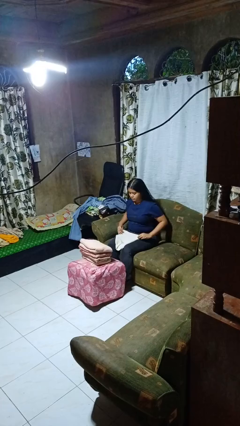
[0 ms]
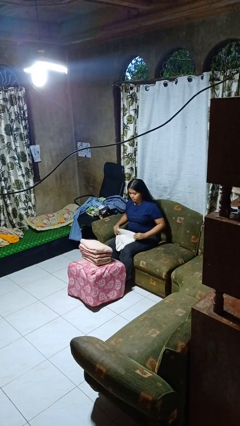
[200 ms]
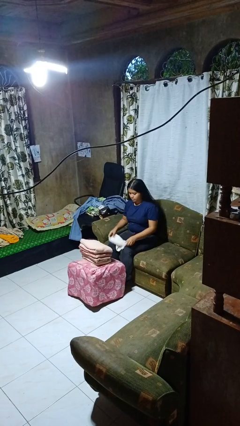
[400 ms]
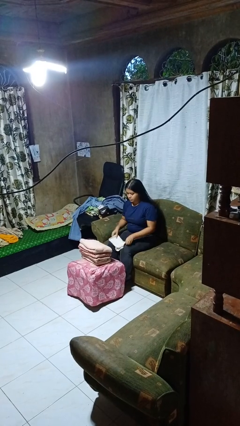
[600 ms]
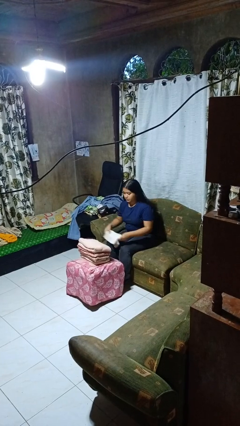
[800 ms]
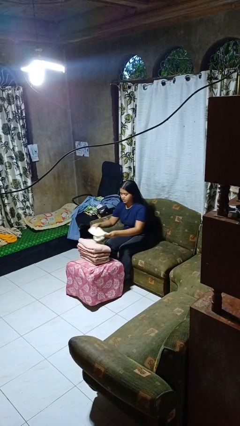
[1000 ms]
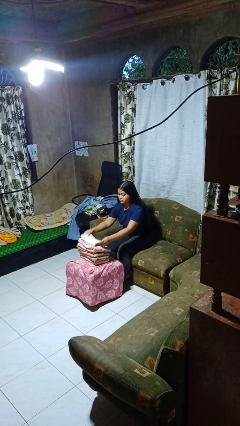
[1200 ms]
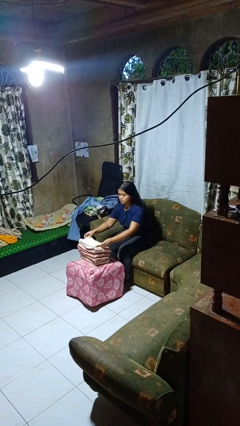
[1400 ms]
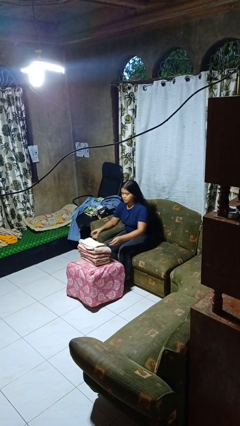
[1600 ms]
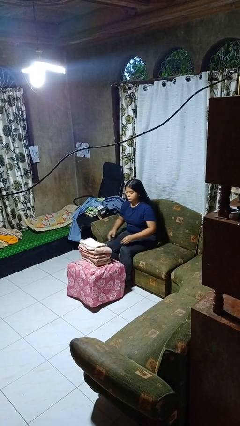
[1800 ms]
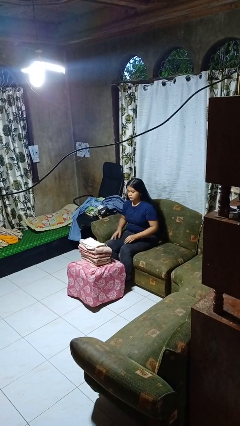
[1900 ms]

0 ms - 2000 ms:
person folds towel

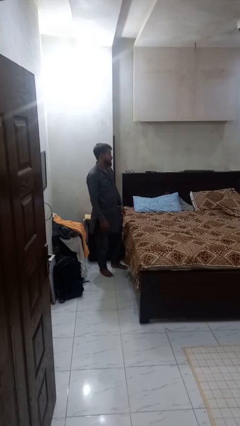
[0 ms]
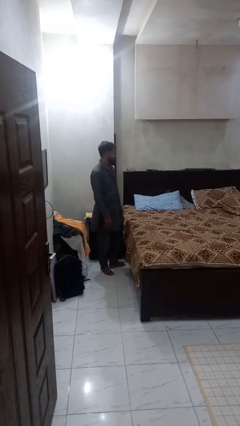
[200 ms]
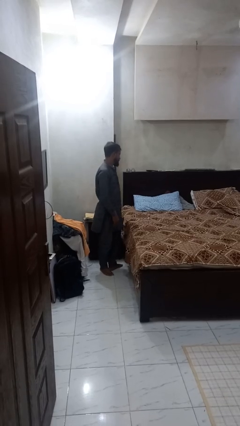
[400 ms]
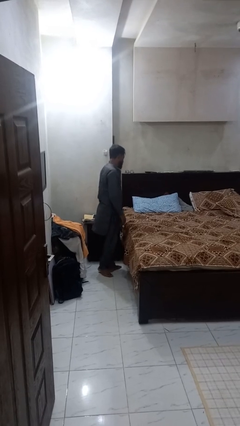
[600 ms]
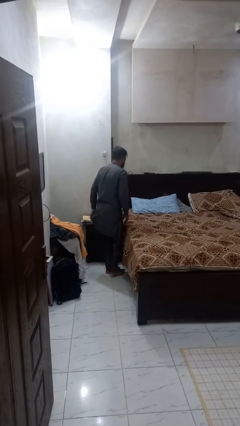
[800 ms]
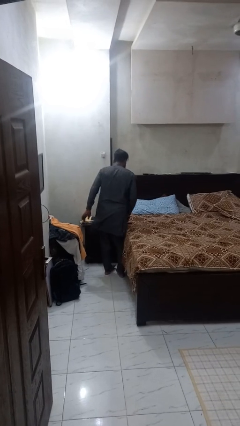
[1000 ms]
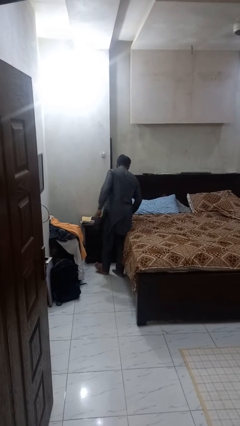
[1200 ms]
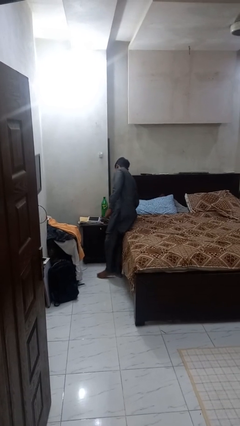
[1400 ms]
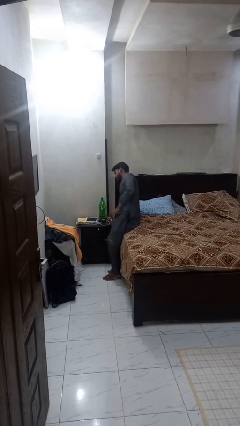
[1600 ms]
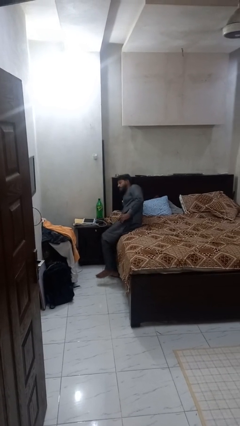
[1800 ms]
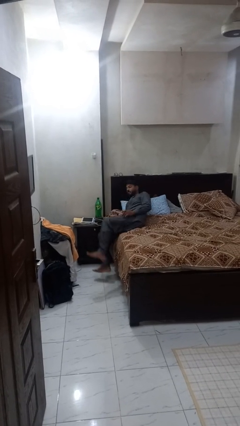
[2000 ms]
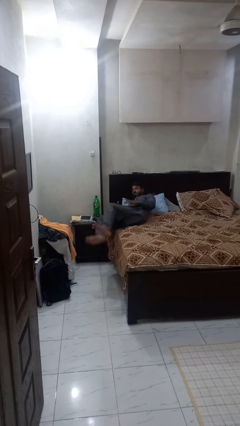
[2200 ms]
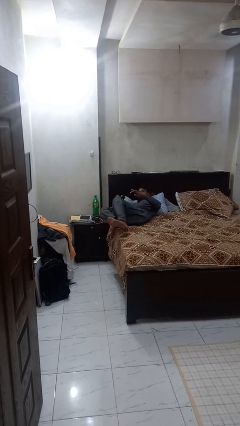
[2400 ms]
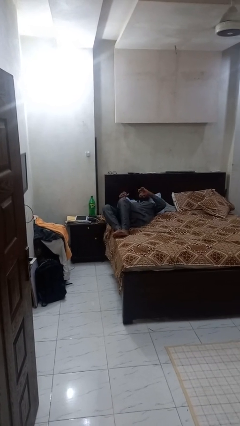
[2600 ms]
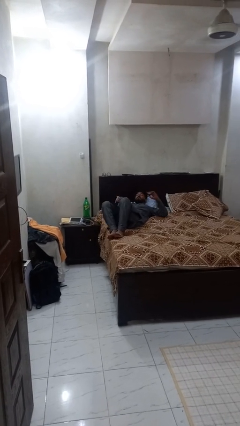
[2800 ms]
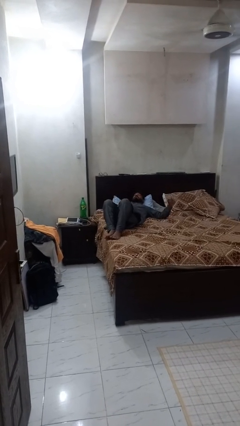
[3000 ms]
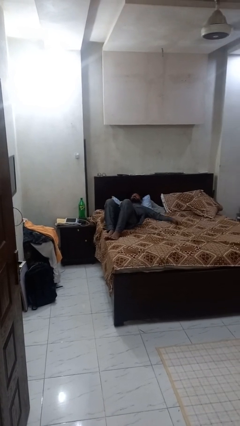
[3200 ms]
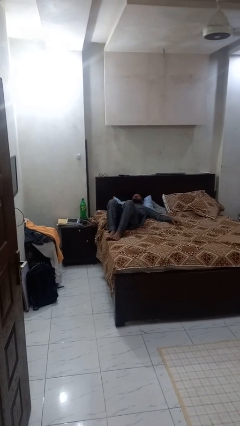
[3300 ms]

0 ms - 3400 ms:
person lies down on bed

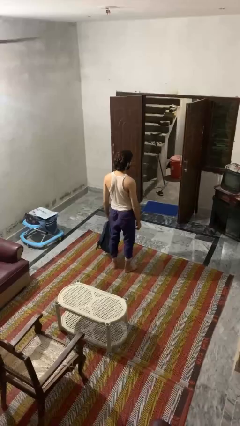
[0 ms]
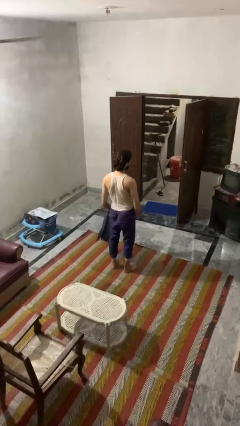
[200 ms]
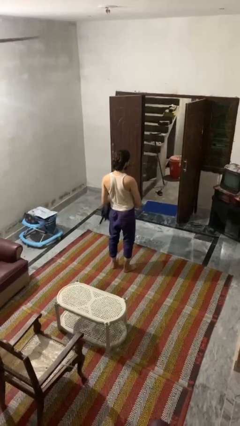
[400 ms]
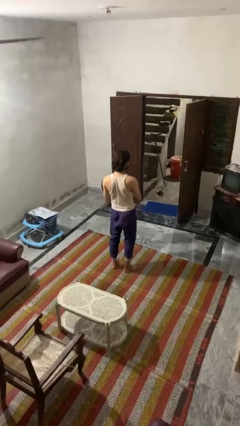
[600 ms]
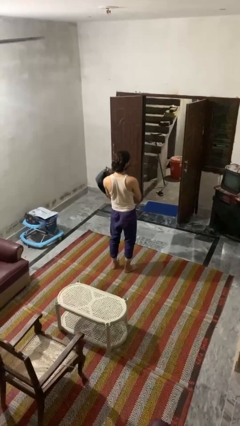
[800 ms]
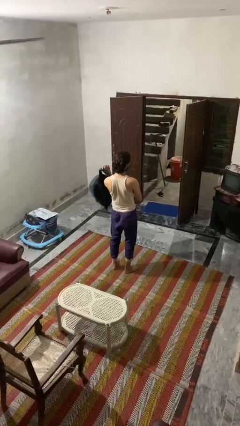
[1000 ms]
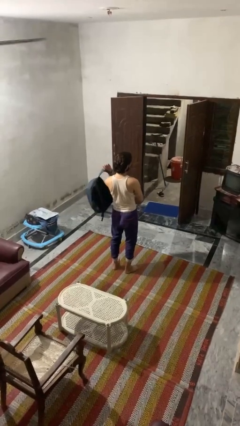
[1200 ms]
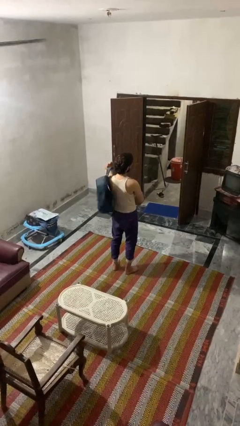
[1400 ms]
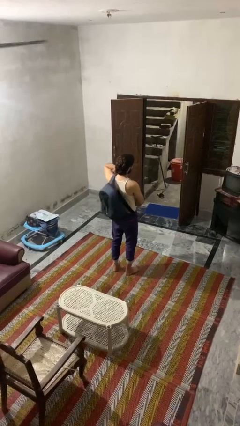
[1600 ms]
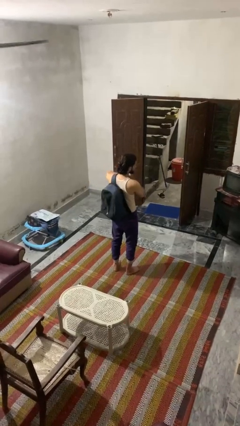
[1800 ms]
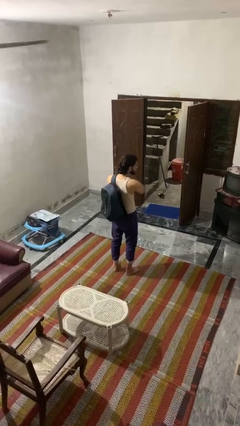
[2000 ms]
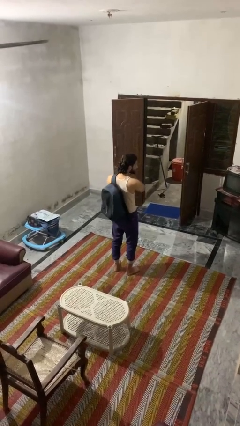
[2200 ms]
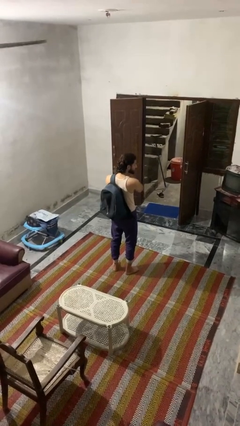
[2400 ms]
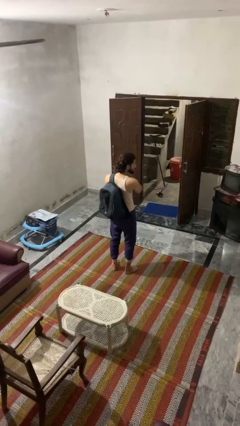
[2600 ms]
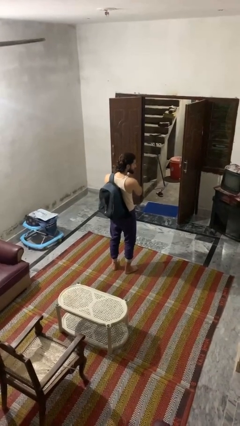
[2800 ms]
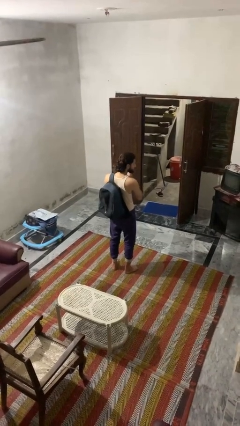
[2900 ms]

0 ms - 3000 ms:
person puts on backpack

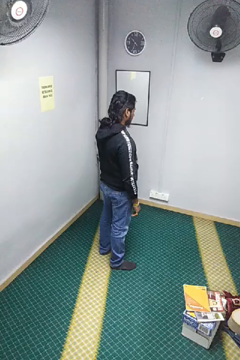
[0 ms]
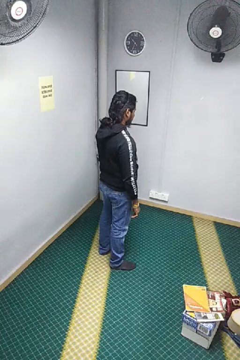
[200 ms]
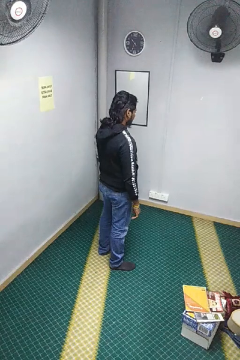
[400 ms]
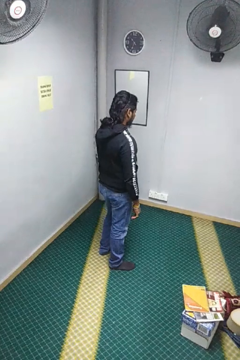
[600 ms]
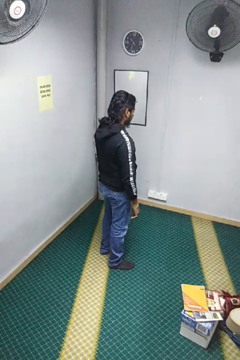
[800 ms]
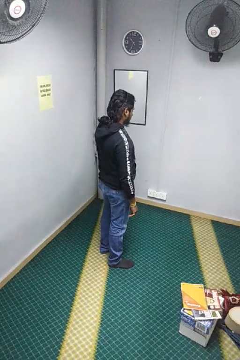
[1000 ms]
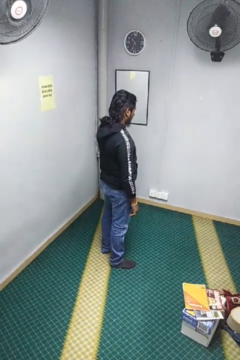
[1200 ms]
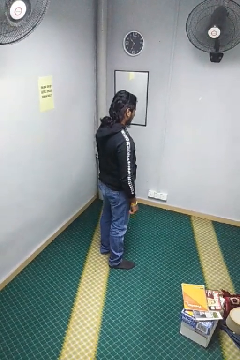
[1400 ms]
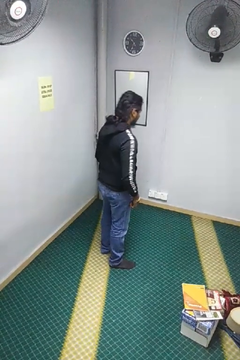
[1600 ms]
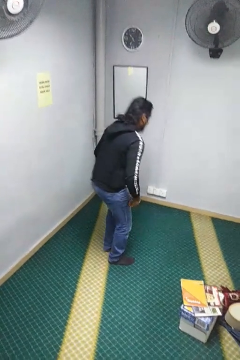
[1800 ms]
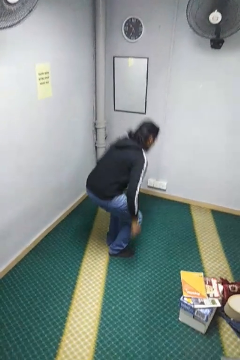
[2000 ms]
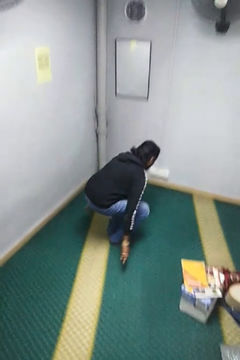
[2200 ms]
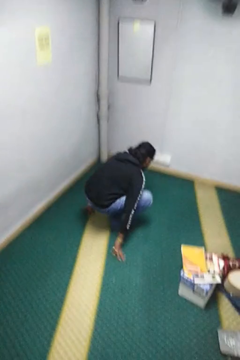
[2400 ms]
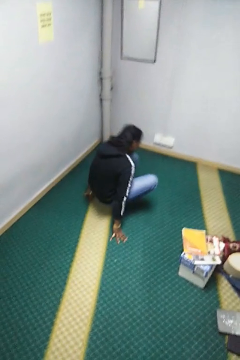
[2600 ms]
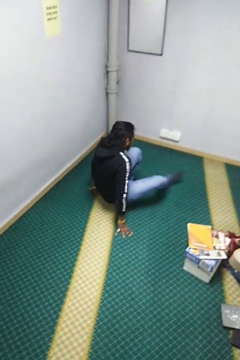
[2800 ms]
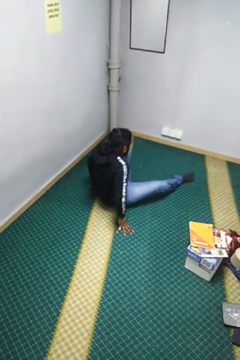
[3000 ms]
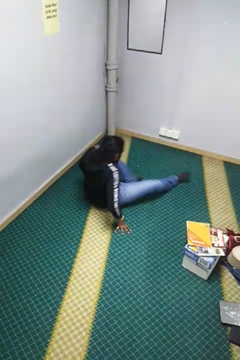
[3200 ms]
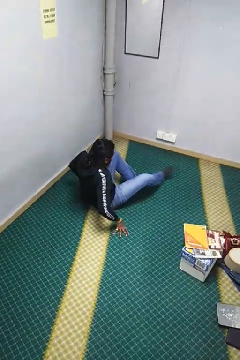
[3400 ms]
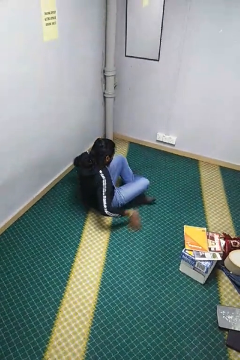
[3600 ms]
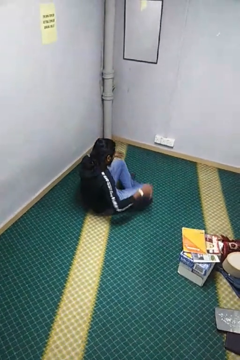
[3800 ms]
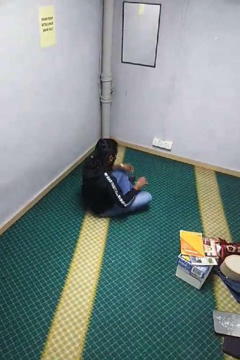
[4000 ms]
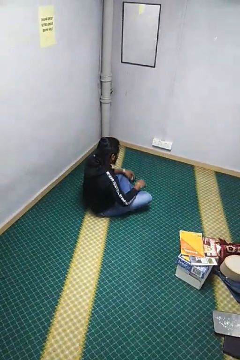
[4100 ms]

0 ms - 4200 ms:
person sits crisscross

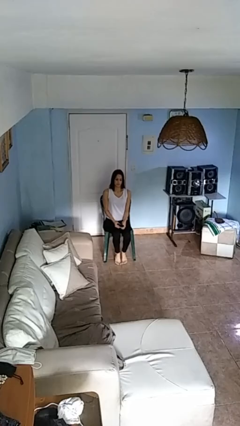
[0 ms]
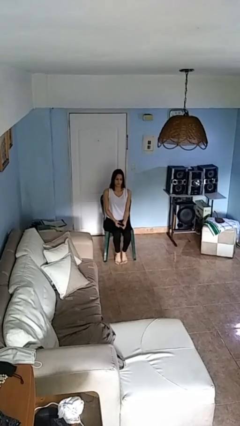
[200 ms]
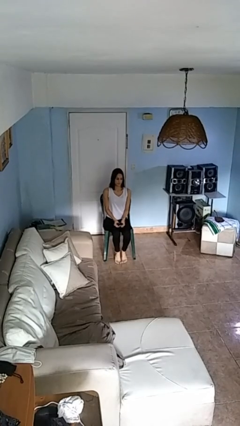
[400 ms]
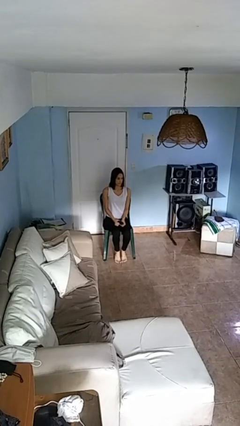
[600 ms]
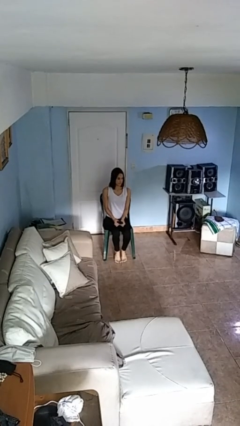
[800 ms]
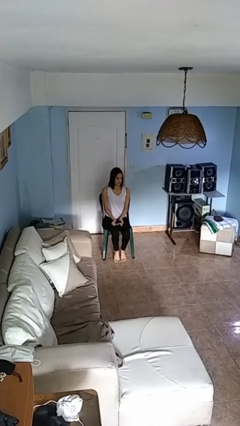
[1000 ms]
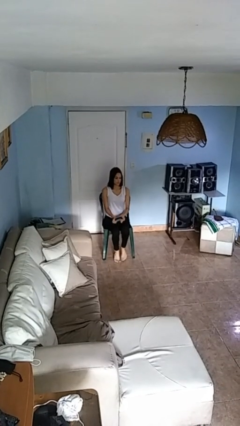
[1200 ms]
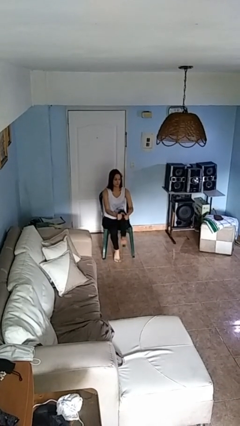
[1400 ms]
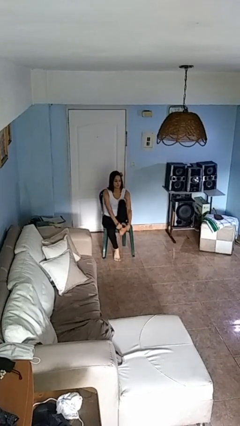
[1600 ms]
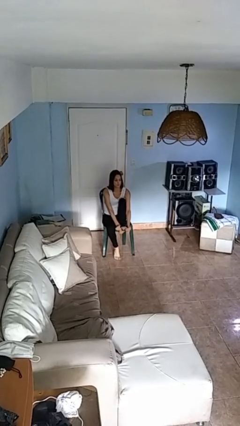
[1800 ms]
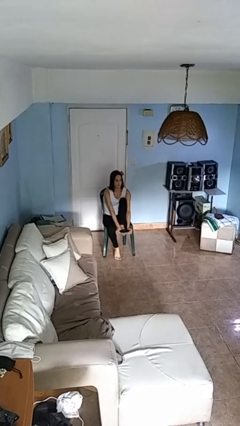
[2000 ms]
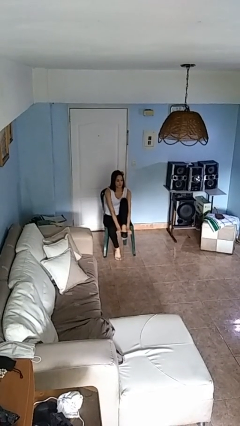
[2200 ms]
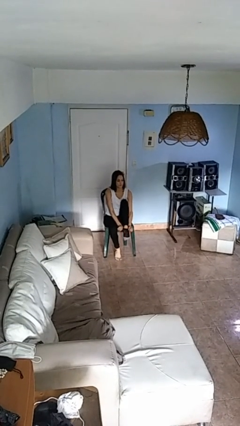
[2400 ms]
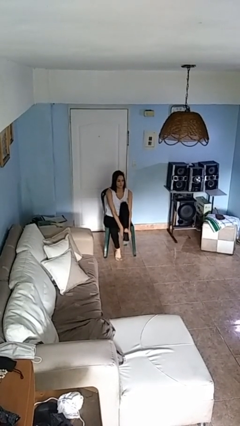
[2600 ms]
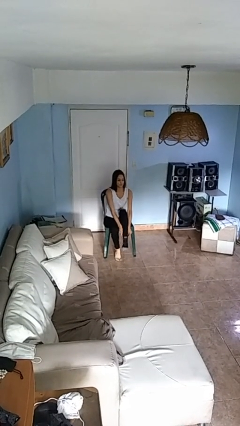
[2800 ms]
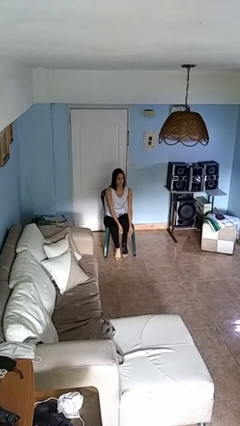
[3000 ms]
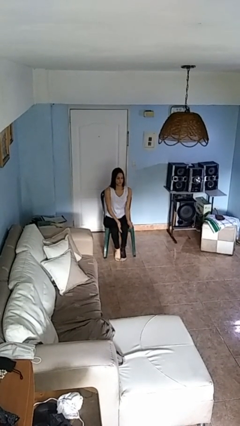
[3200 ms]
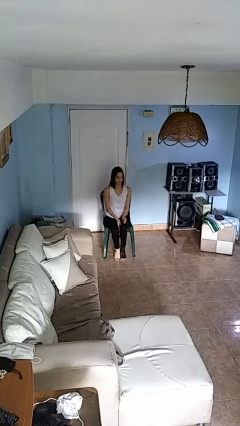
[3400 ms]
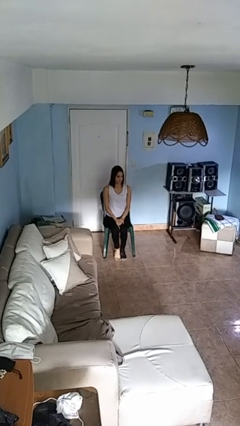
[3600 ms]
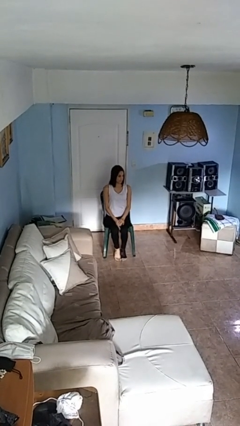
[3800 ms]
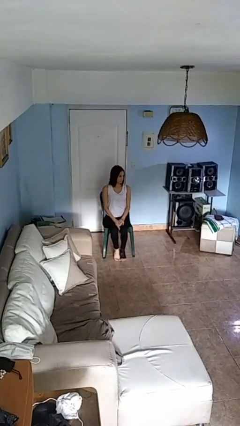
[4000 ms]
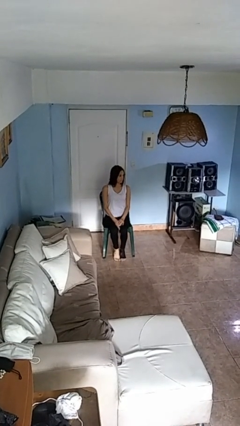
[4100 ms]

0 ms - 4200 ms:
person puts on socks

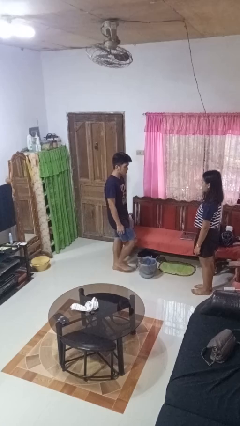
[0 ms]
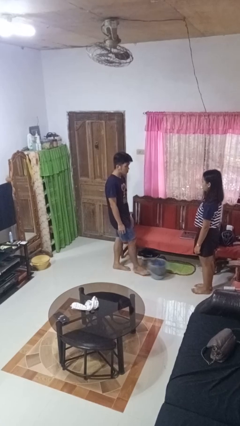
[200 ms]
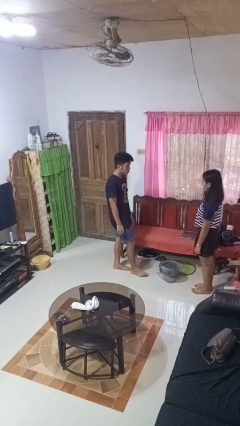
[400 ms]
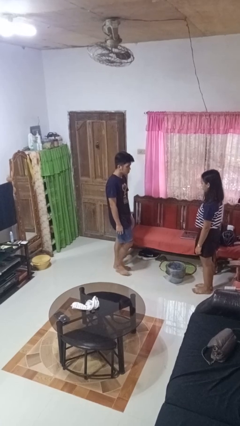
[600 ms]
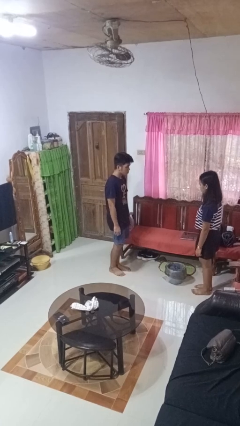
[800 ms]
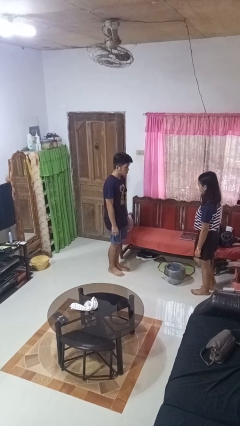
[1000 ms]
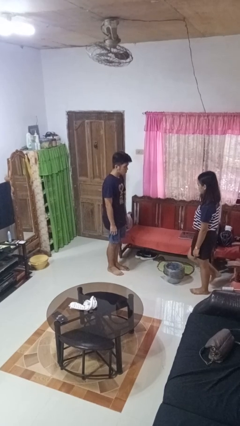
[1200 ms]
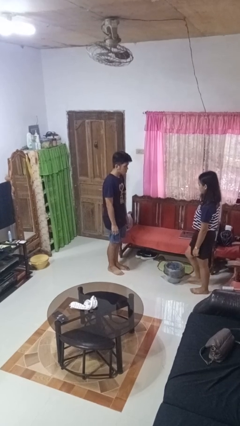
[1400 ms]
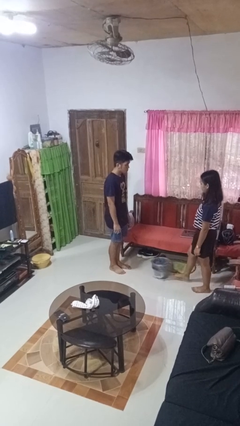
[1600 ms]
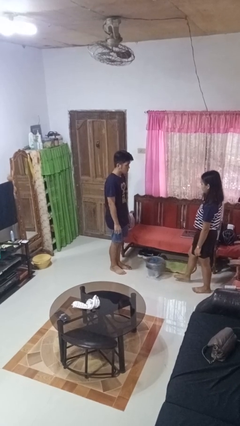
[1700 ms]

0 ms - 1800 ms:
person kicks object to person
